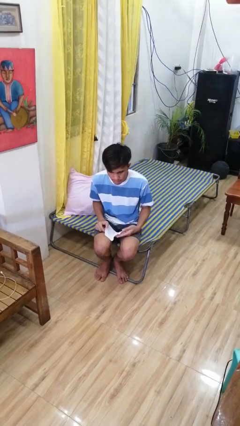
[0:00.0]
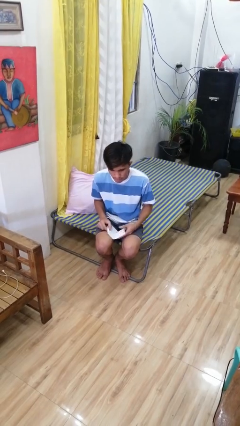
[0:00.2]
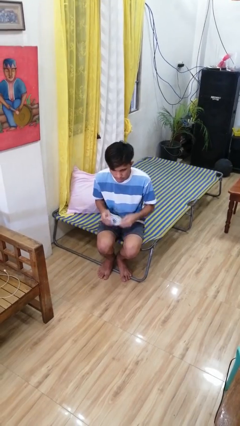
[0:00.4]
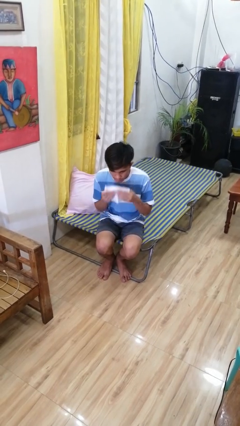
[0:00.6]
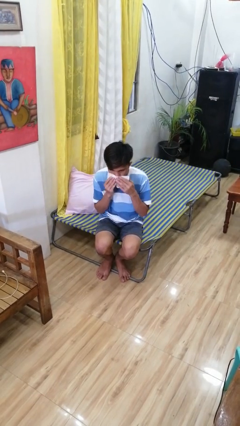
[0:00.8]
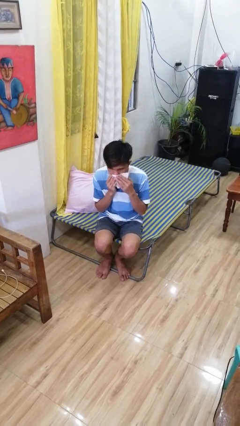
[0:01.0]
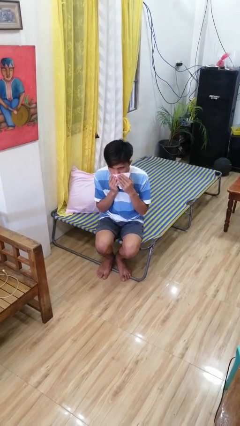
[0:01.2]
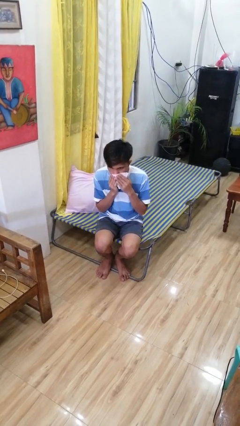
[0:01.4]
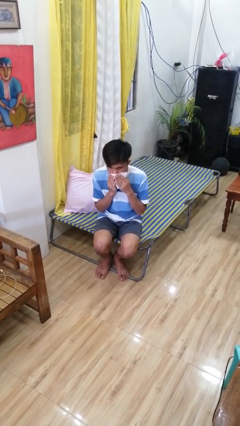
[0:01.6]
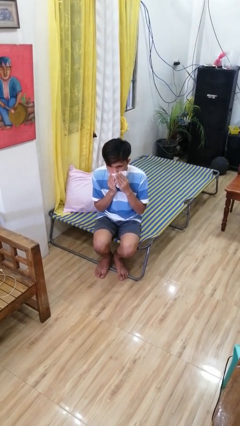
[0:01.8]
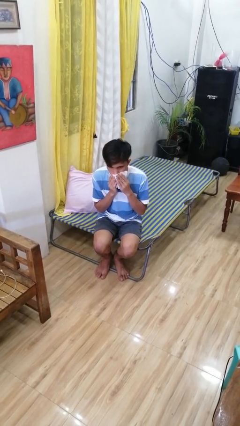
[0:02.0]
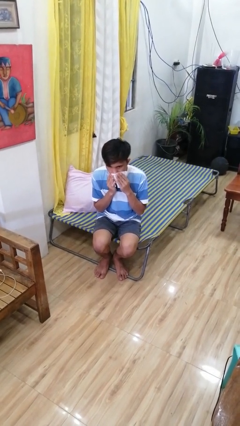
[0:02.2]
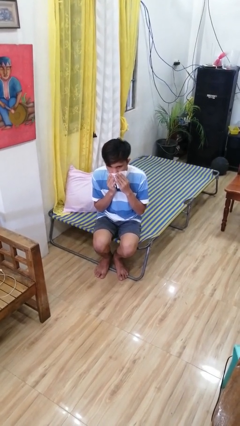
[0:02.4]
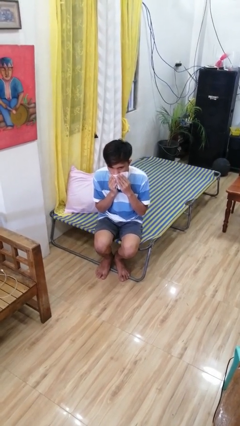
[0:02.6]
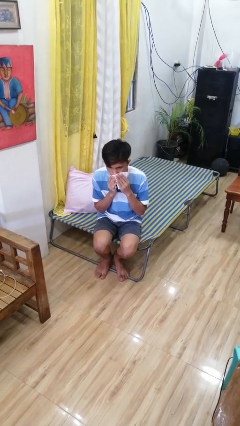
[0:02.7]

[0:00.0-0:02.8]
person wipes mouth with napkin

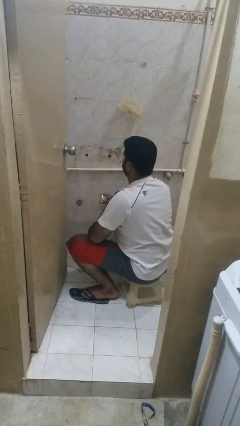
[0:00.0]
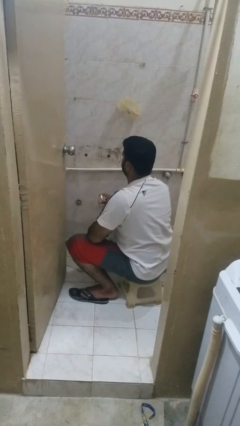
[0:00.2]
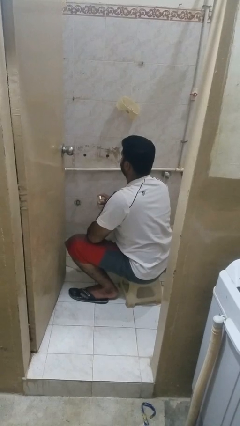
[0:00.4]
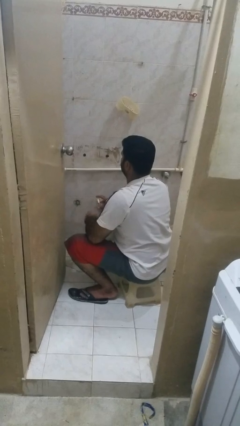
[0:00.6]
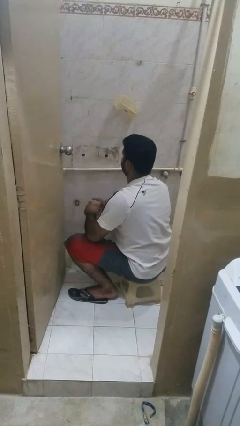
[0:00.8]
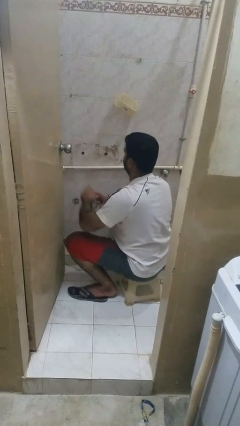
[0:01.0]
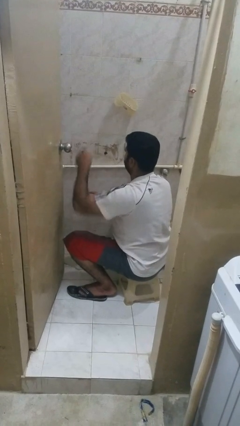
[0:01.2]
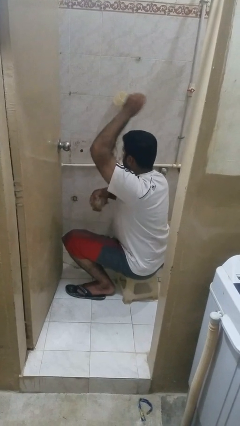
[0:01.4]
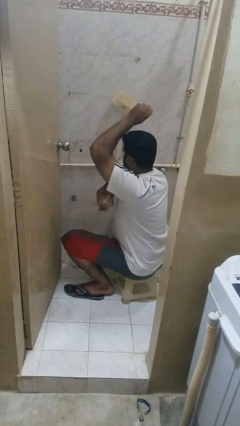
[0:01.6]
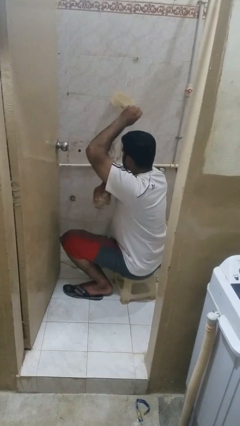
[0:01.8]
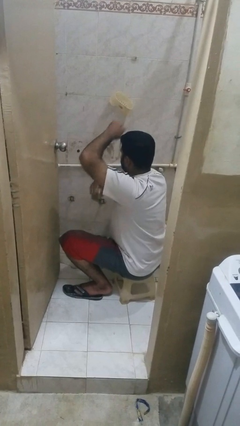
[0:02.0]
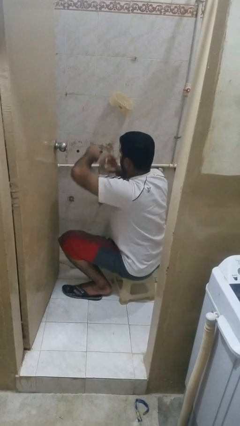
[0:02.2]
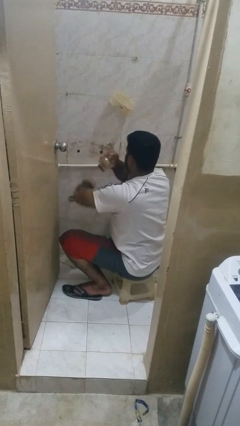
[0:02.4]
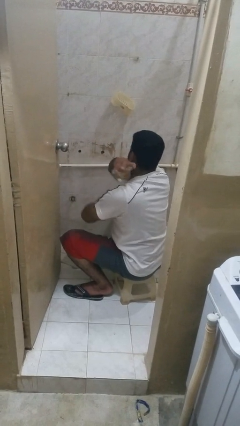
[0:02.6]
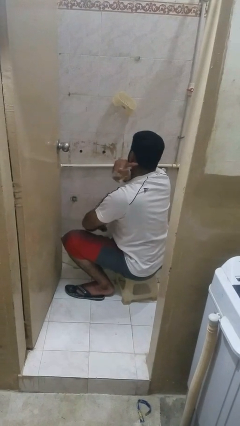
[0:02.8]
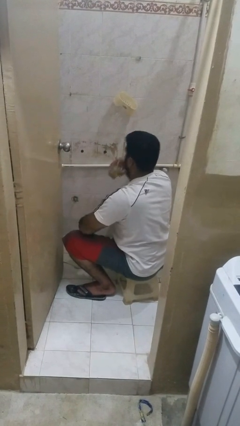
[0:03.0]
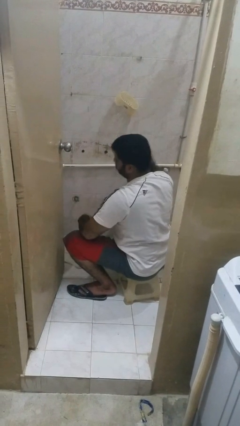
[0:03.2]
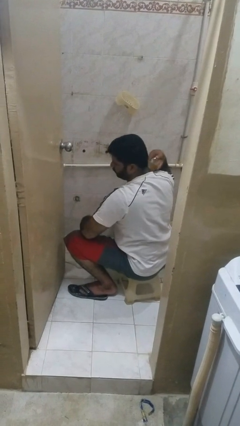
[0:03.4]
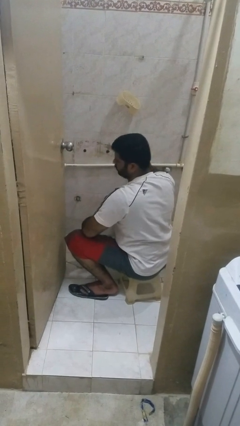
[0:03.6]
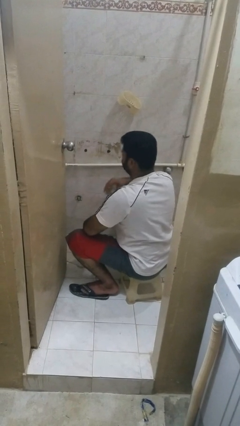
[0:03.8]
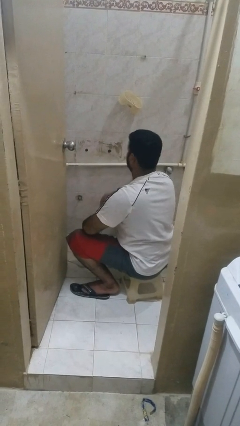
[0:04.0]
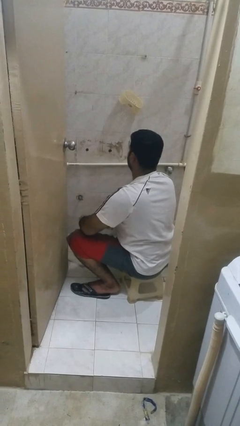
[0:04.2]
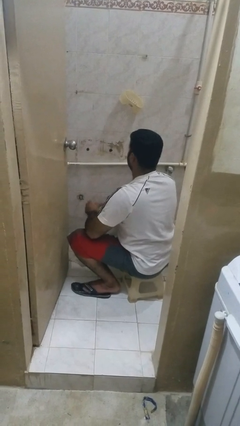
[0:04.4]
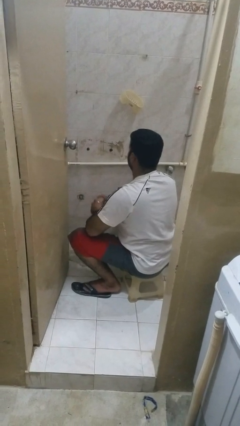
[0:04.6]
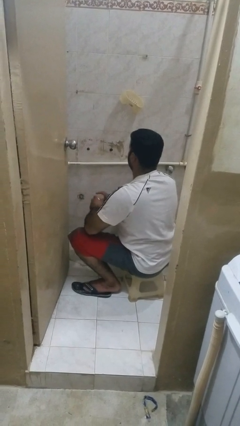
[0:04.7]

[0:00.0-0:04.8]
person applies deodorant

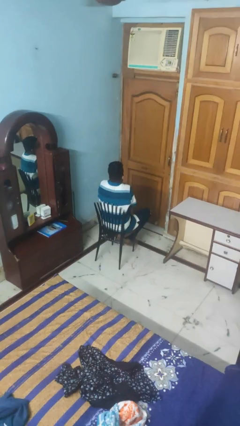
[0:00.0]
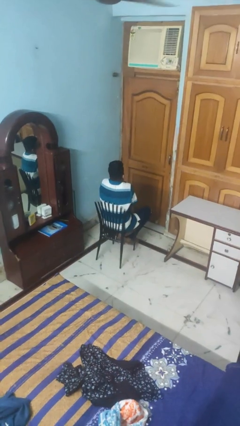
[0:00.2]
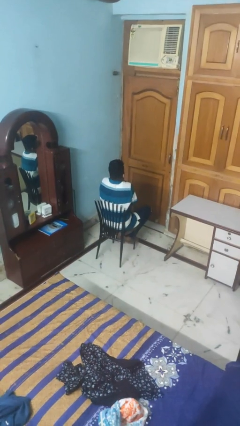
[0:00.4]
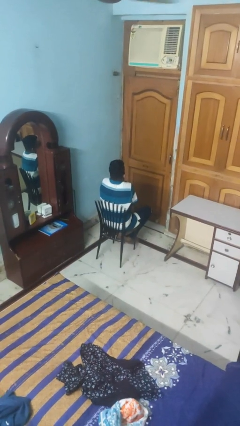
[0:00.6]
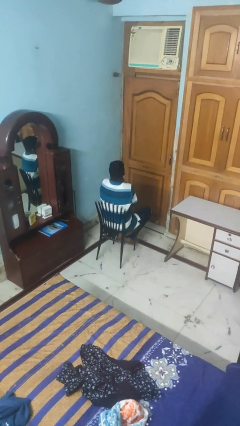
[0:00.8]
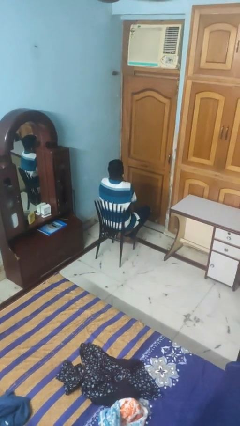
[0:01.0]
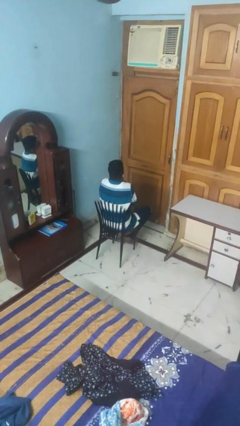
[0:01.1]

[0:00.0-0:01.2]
person shrugs

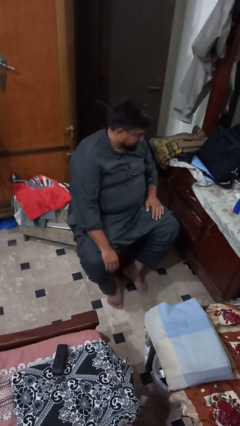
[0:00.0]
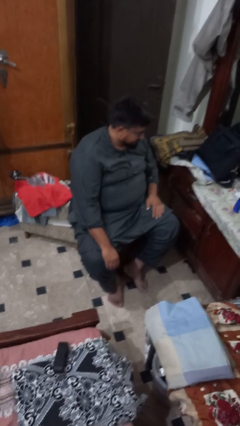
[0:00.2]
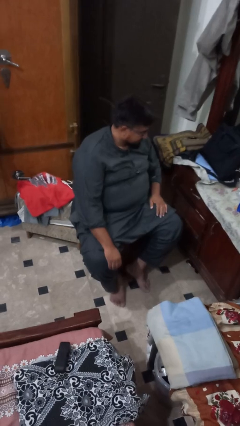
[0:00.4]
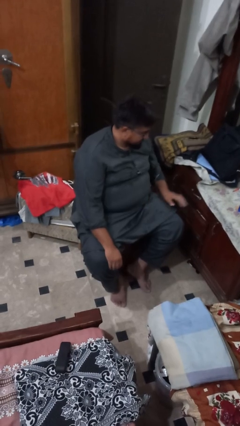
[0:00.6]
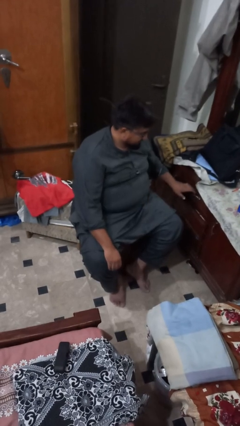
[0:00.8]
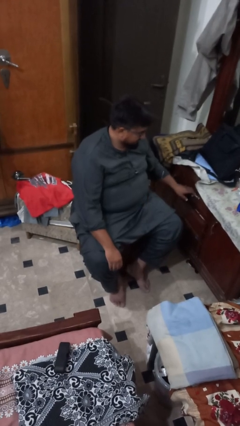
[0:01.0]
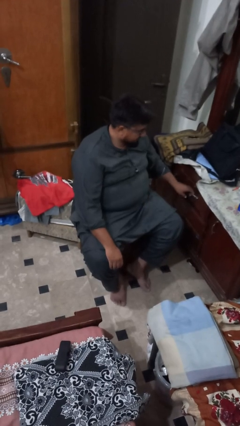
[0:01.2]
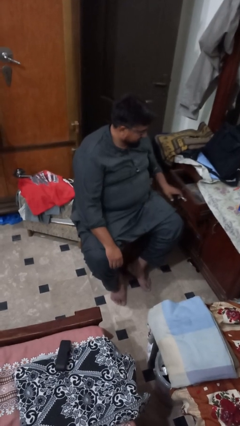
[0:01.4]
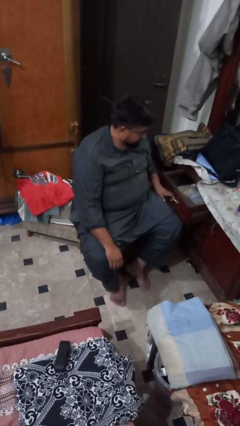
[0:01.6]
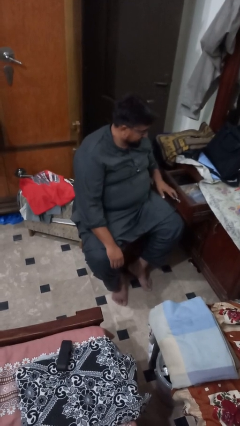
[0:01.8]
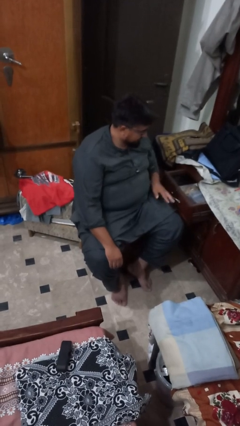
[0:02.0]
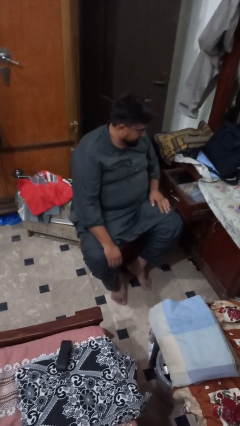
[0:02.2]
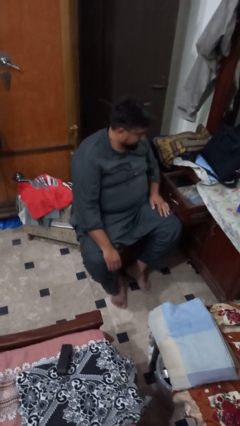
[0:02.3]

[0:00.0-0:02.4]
person opens dresser drawer

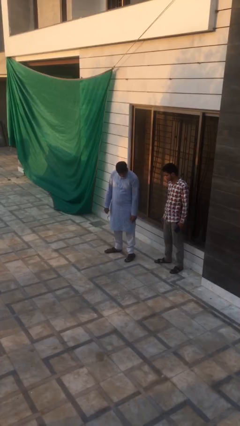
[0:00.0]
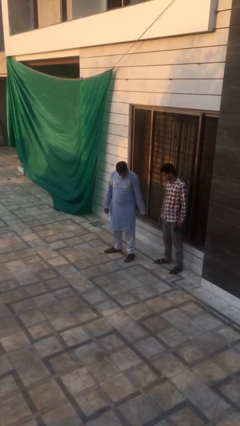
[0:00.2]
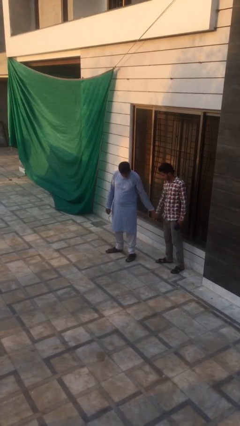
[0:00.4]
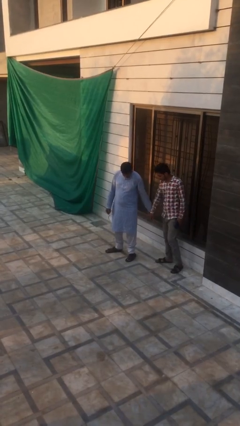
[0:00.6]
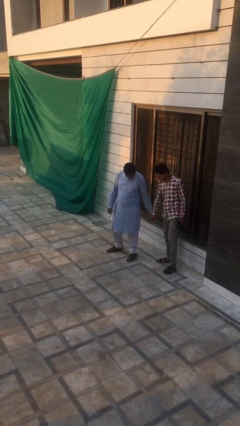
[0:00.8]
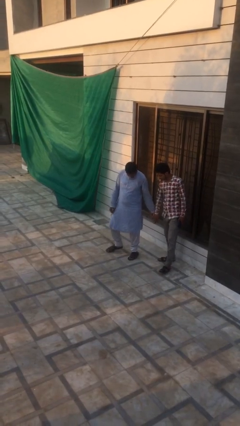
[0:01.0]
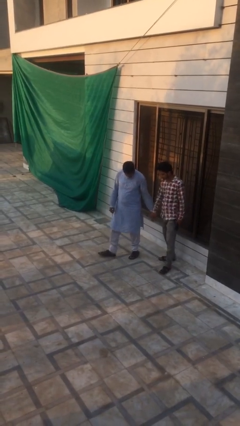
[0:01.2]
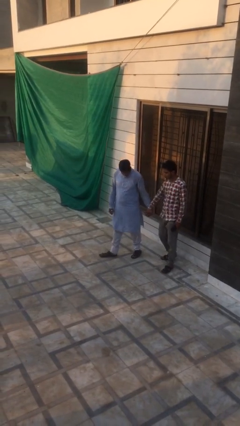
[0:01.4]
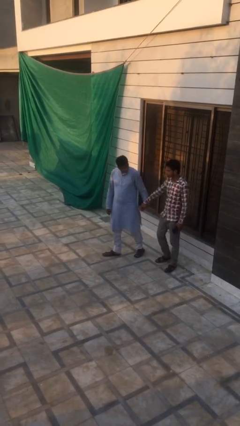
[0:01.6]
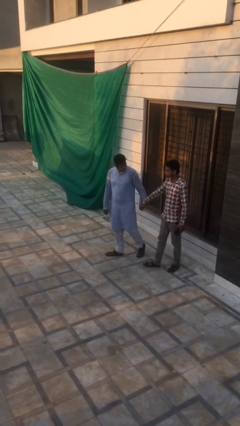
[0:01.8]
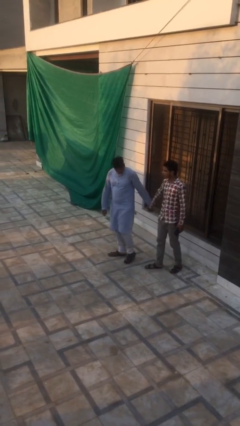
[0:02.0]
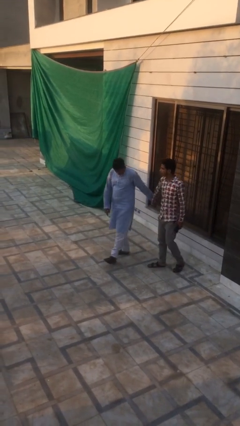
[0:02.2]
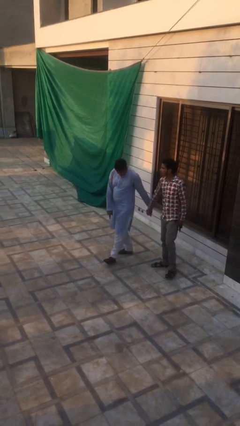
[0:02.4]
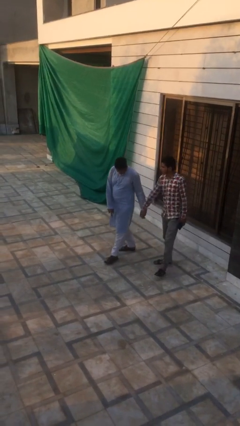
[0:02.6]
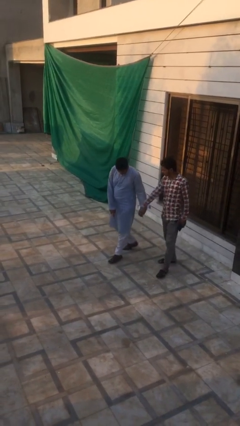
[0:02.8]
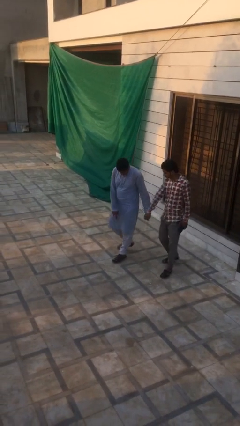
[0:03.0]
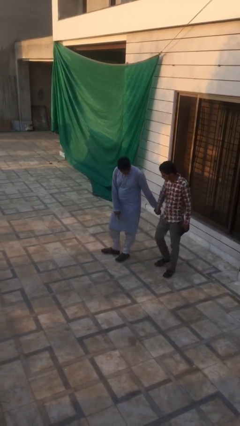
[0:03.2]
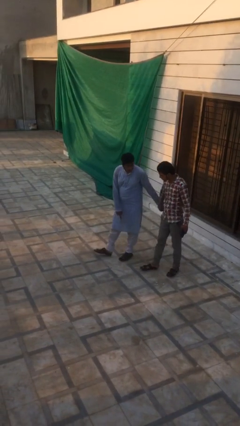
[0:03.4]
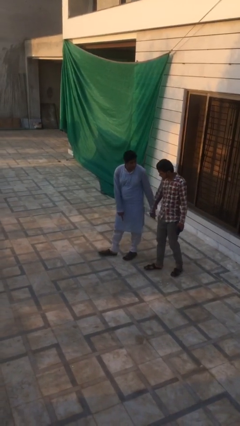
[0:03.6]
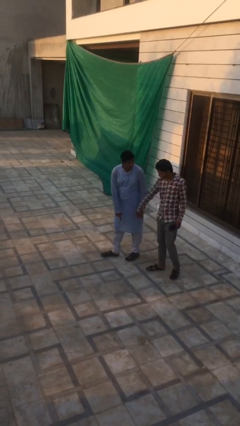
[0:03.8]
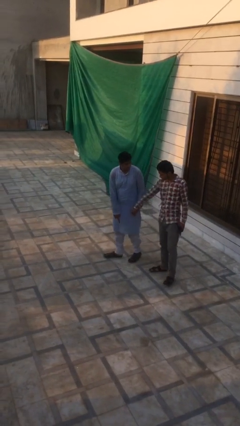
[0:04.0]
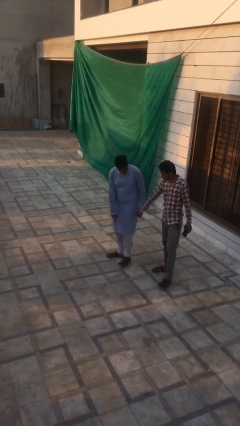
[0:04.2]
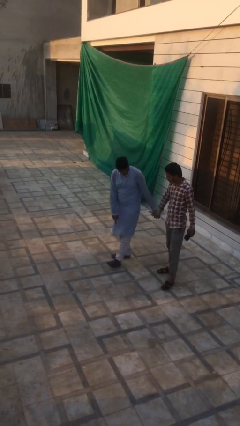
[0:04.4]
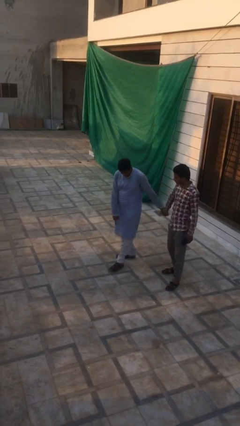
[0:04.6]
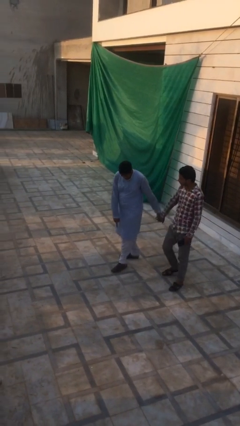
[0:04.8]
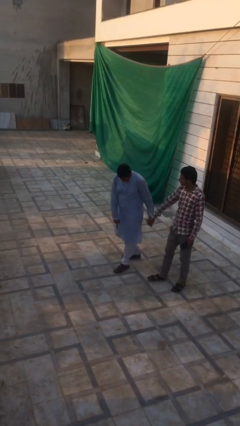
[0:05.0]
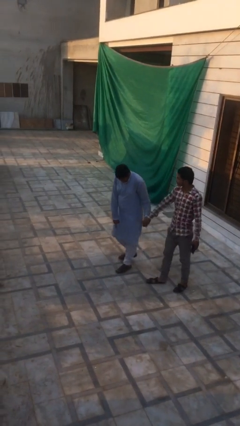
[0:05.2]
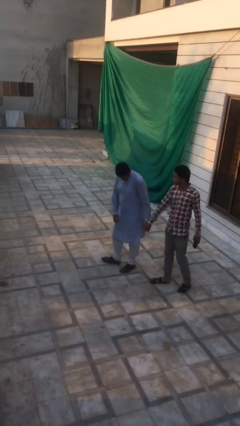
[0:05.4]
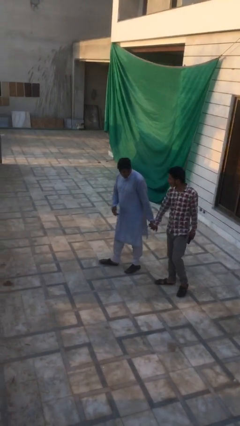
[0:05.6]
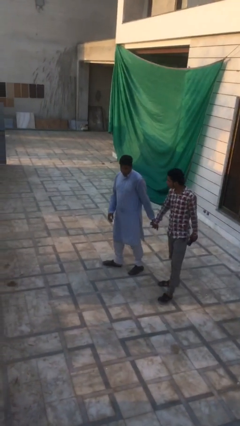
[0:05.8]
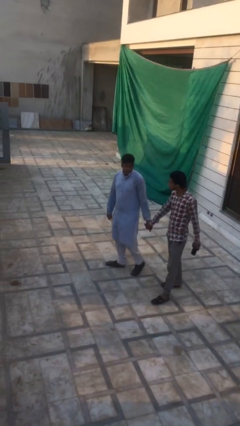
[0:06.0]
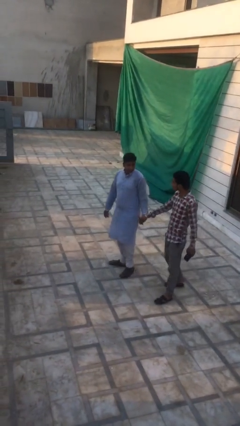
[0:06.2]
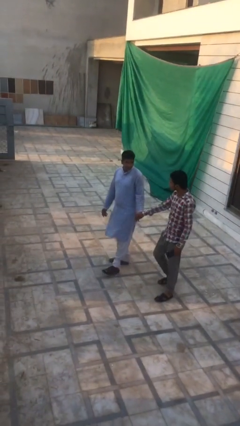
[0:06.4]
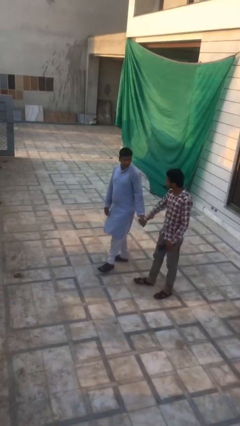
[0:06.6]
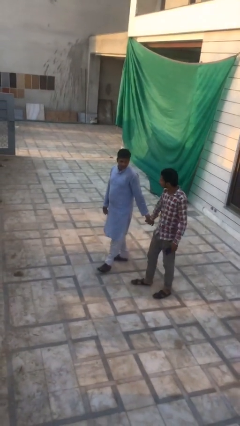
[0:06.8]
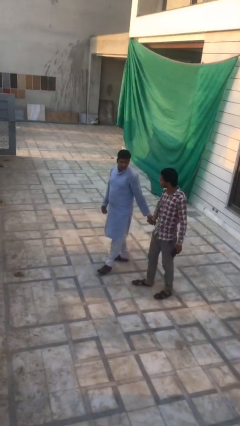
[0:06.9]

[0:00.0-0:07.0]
person holds hand
